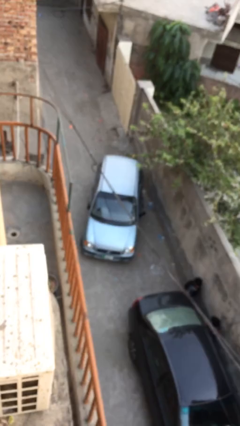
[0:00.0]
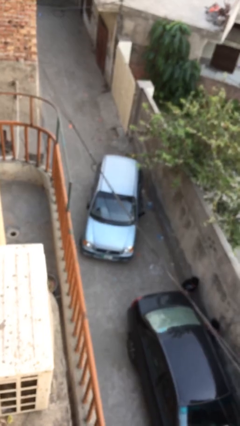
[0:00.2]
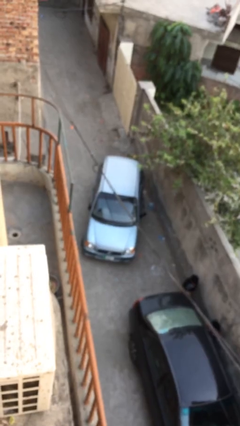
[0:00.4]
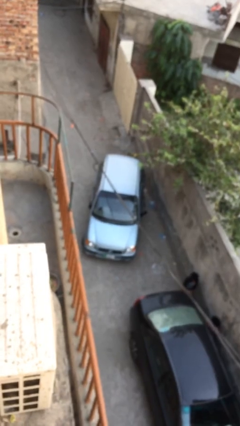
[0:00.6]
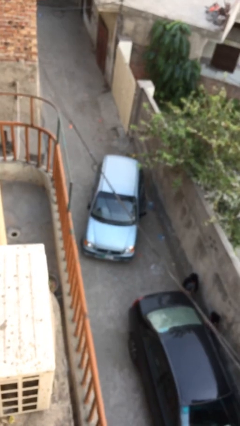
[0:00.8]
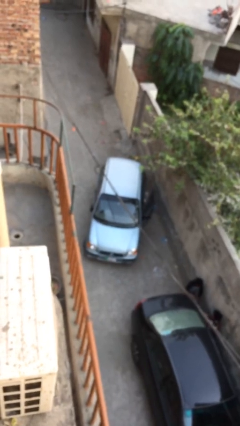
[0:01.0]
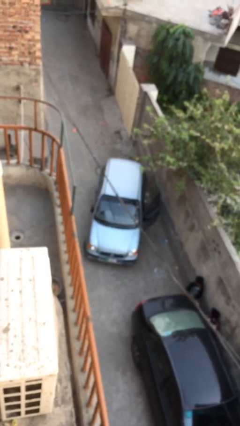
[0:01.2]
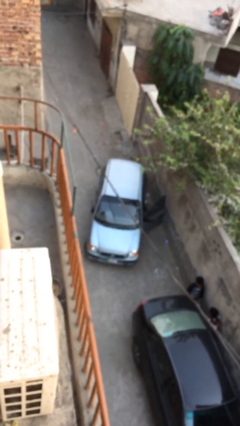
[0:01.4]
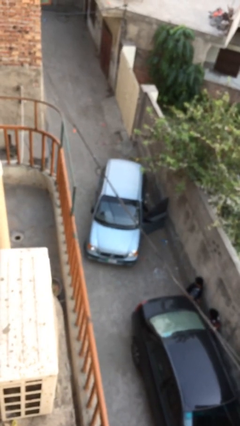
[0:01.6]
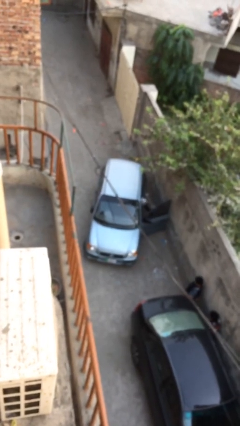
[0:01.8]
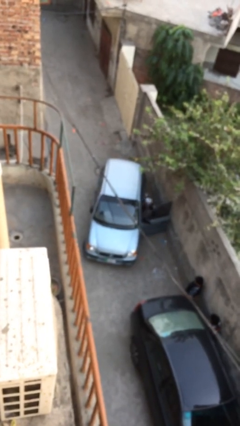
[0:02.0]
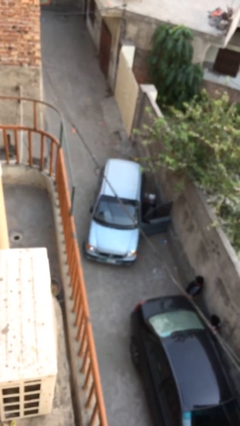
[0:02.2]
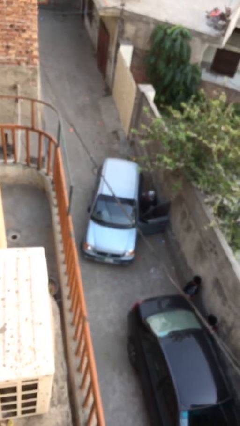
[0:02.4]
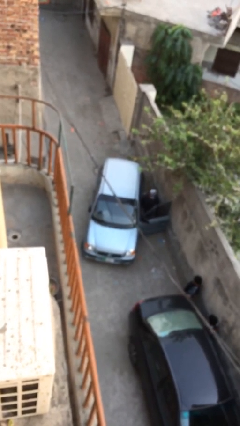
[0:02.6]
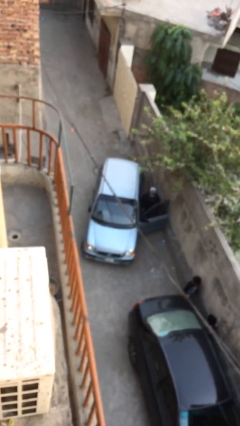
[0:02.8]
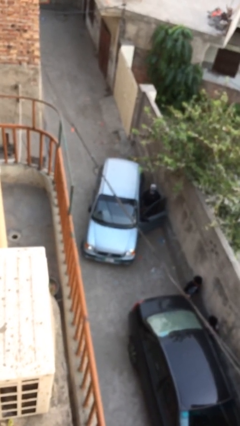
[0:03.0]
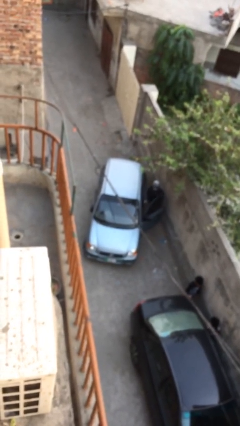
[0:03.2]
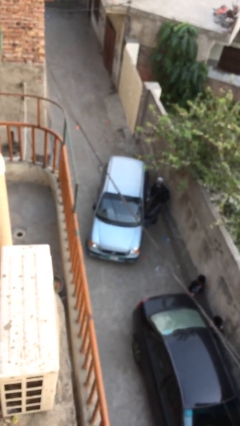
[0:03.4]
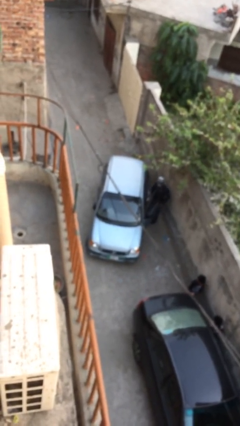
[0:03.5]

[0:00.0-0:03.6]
car drops off person

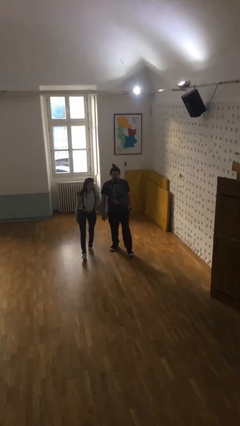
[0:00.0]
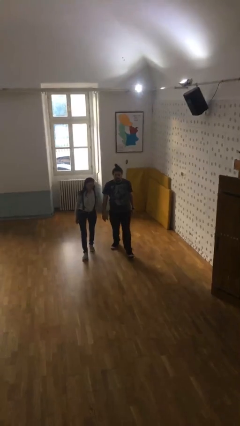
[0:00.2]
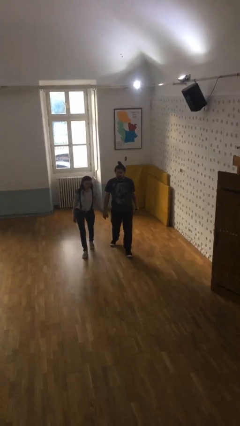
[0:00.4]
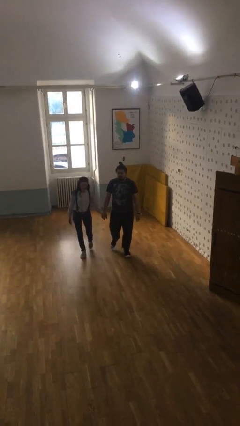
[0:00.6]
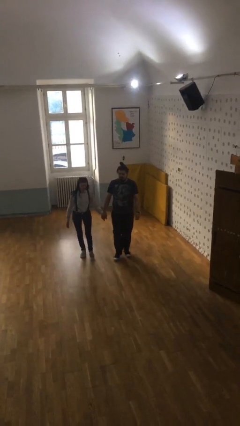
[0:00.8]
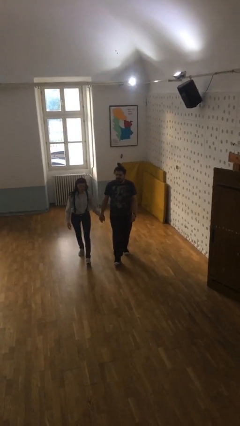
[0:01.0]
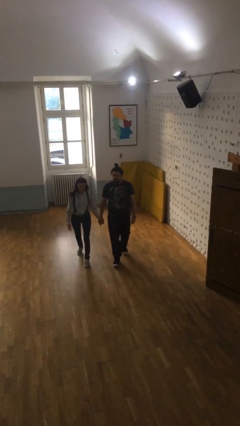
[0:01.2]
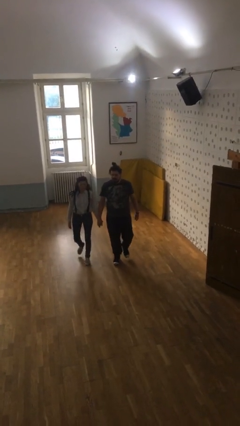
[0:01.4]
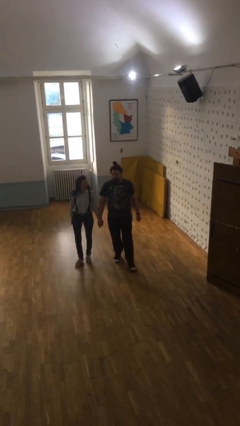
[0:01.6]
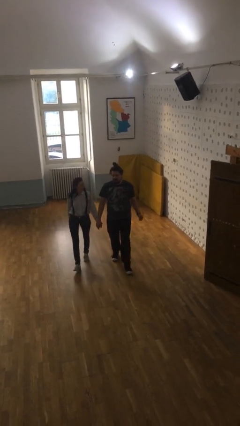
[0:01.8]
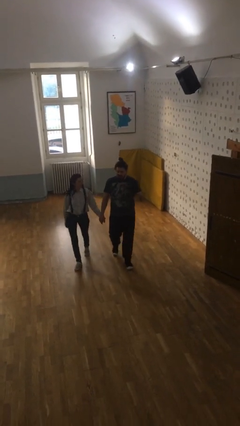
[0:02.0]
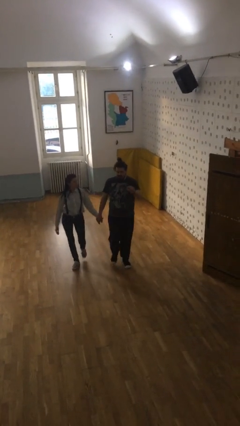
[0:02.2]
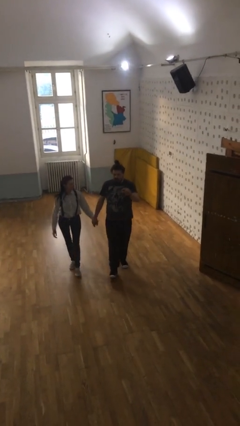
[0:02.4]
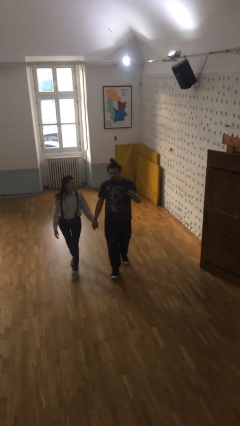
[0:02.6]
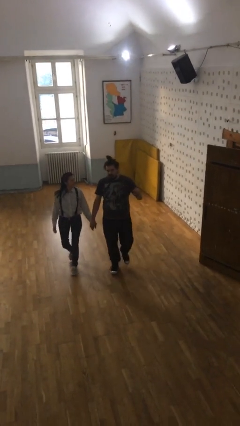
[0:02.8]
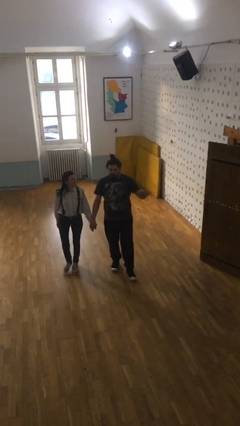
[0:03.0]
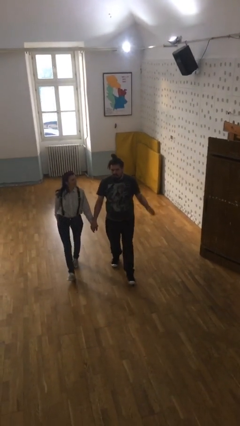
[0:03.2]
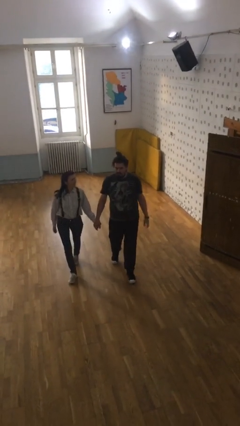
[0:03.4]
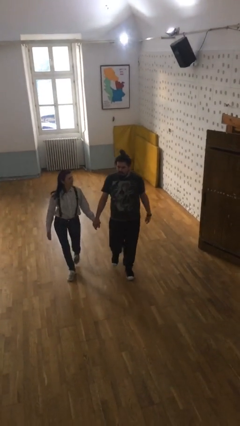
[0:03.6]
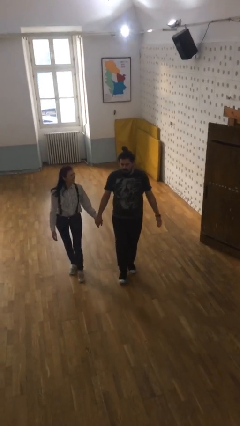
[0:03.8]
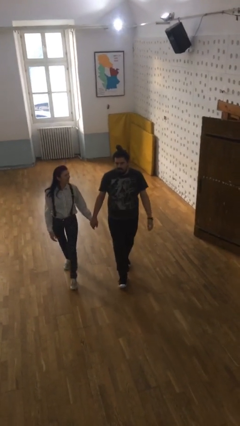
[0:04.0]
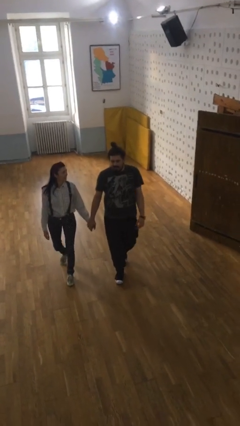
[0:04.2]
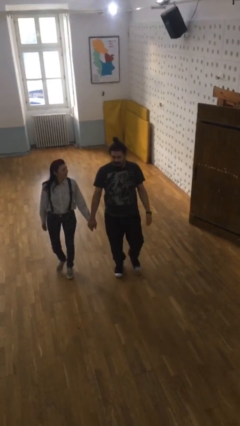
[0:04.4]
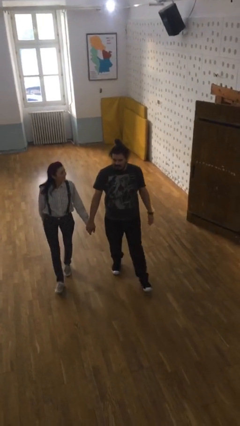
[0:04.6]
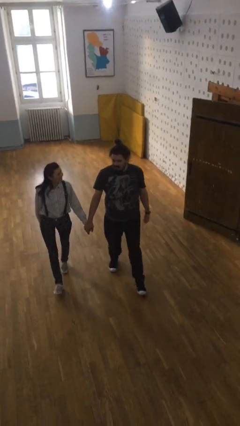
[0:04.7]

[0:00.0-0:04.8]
person holds hand

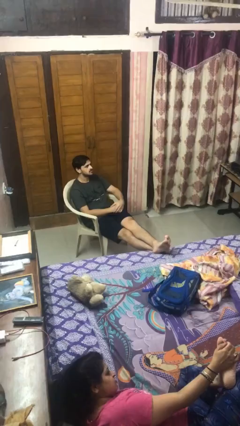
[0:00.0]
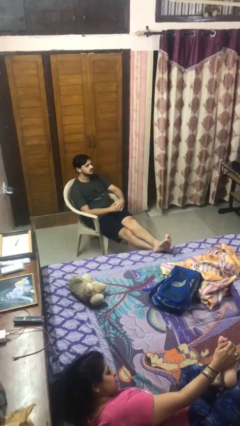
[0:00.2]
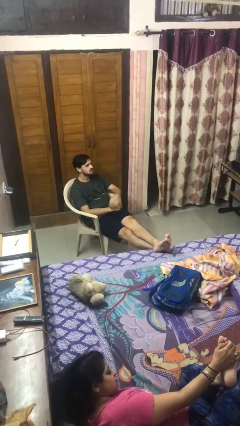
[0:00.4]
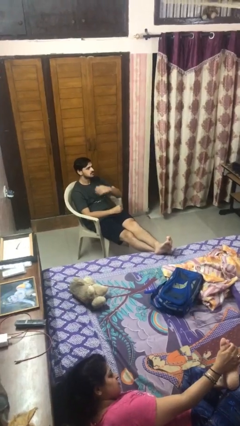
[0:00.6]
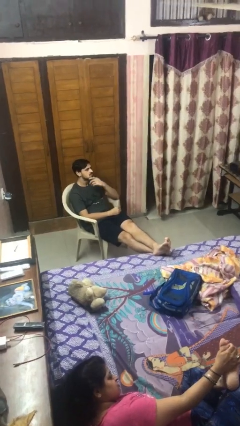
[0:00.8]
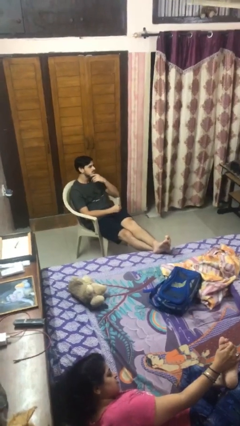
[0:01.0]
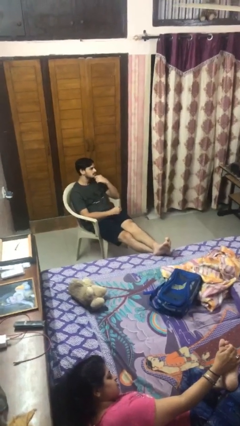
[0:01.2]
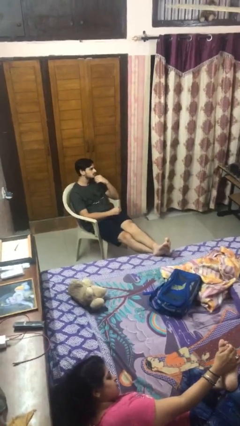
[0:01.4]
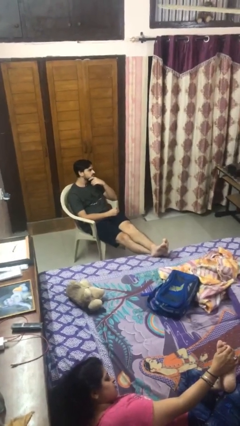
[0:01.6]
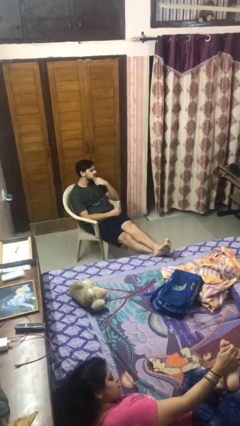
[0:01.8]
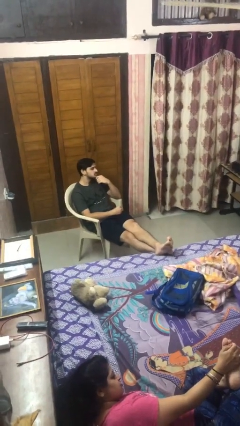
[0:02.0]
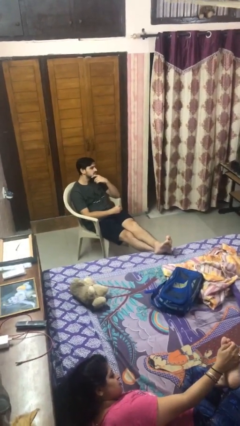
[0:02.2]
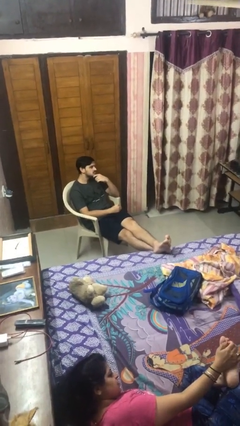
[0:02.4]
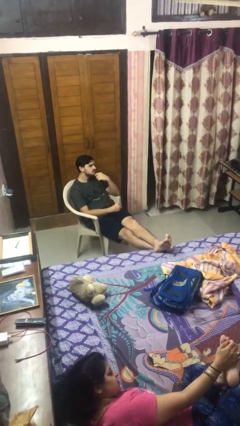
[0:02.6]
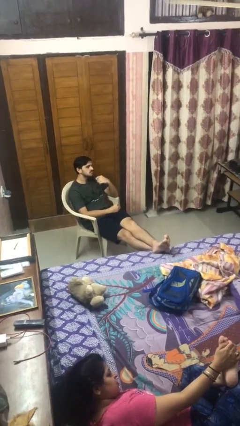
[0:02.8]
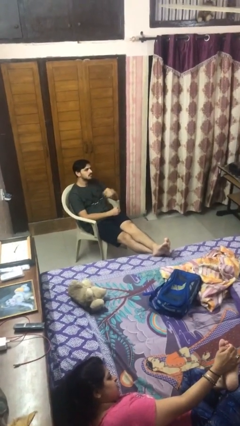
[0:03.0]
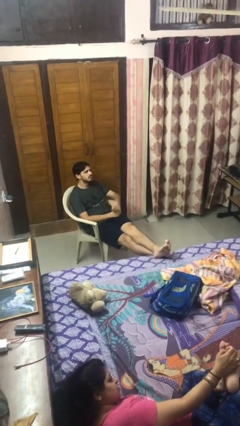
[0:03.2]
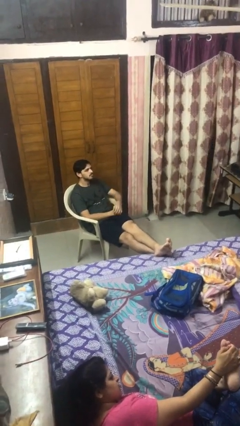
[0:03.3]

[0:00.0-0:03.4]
person strokes chin

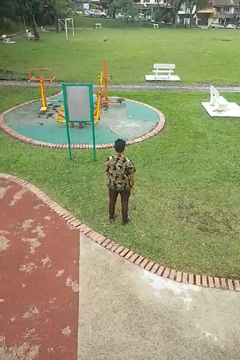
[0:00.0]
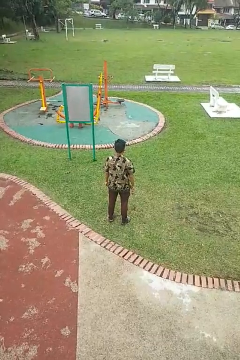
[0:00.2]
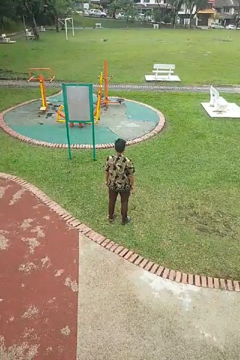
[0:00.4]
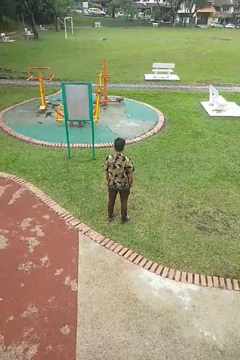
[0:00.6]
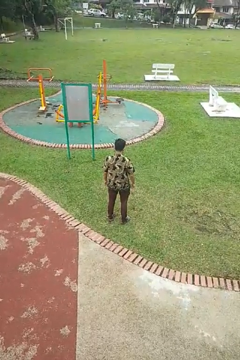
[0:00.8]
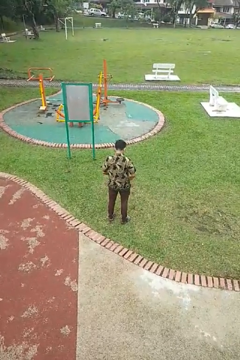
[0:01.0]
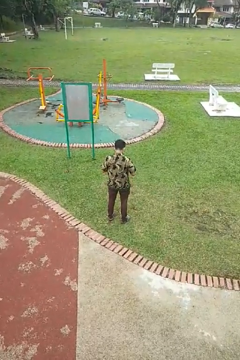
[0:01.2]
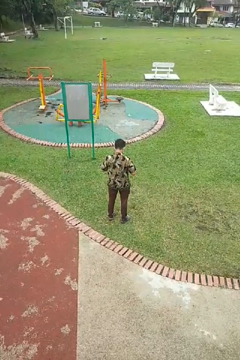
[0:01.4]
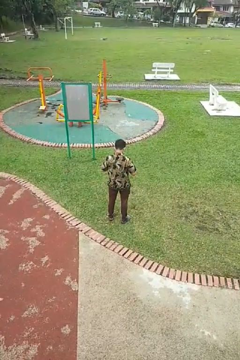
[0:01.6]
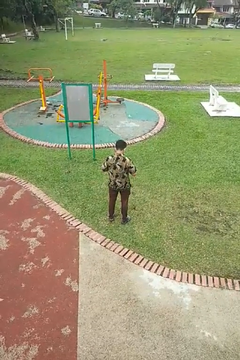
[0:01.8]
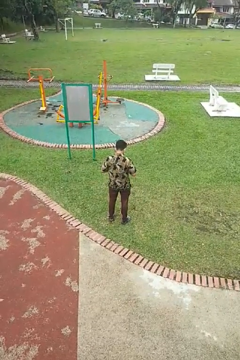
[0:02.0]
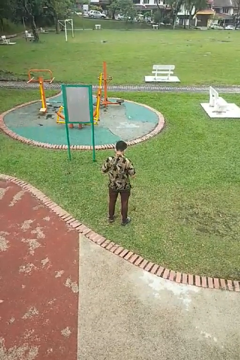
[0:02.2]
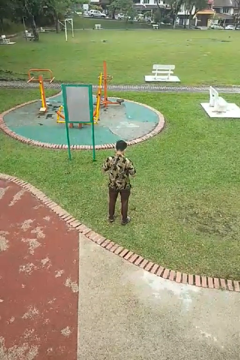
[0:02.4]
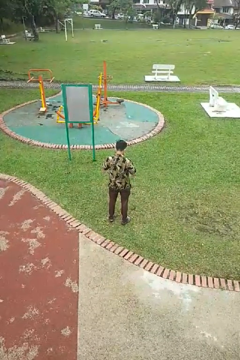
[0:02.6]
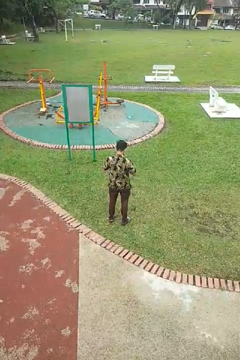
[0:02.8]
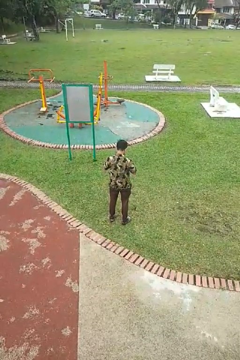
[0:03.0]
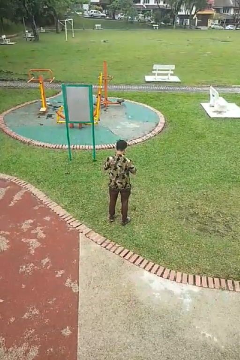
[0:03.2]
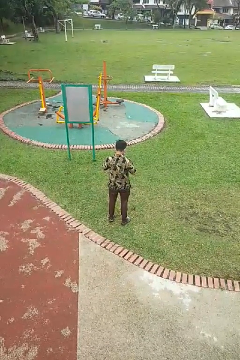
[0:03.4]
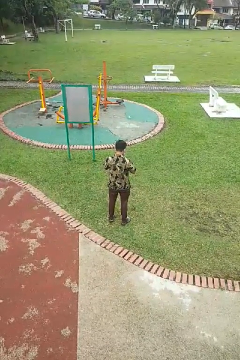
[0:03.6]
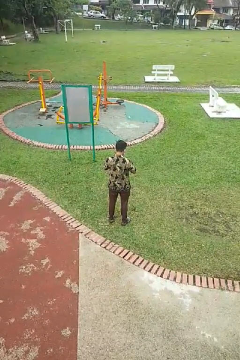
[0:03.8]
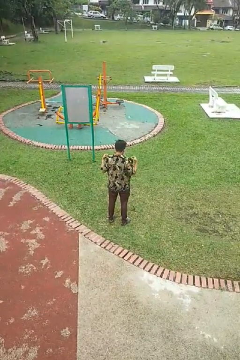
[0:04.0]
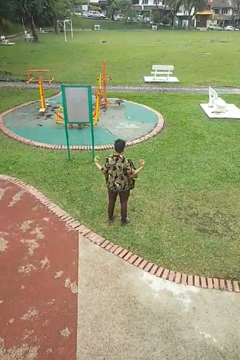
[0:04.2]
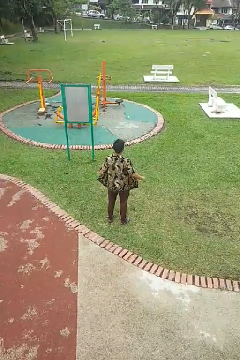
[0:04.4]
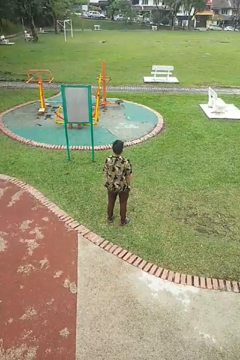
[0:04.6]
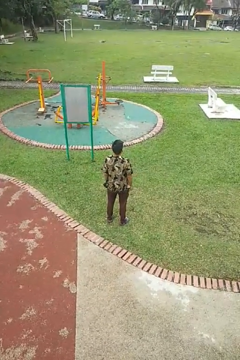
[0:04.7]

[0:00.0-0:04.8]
person unbuttons shirt

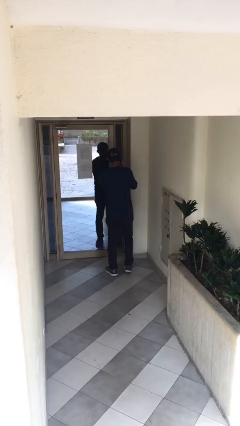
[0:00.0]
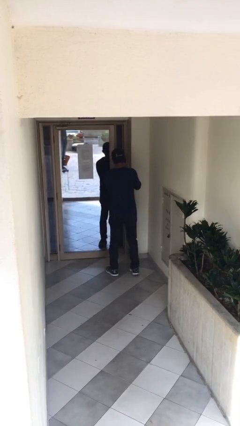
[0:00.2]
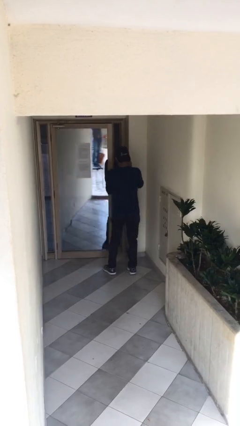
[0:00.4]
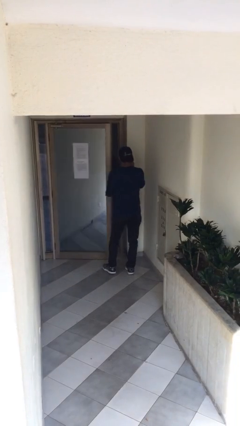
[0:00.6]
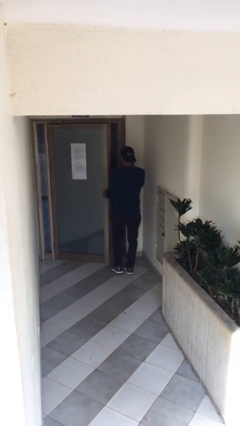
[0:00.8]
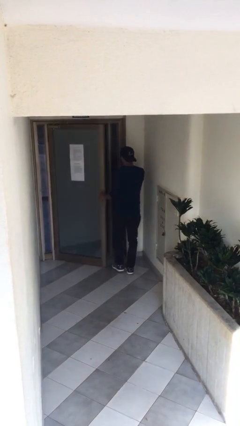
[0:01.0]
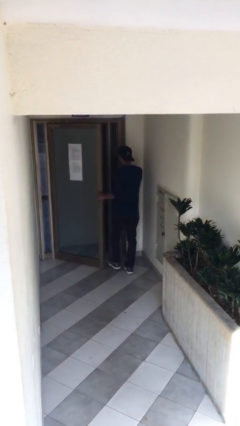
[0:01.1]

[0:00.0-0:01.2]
person opens facility door

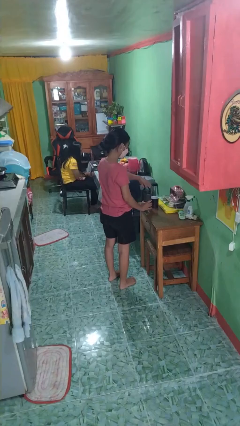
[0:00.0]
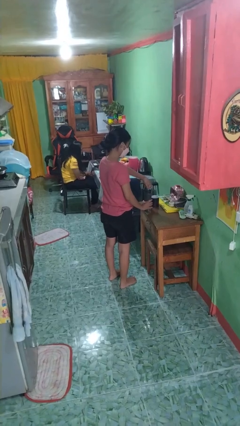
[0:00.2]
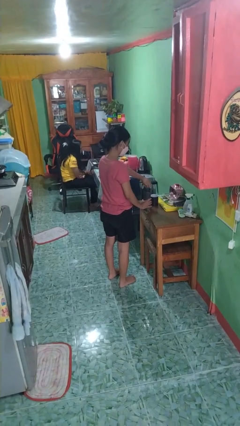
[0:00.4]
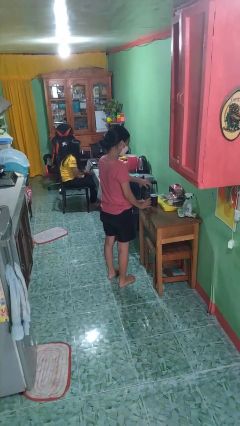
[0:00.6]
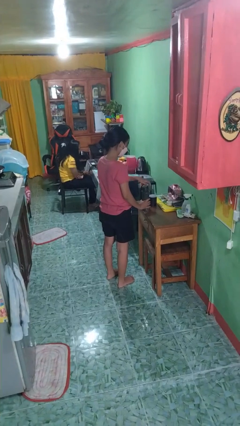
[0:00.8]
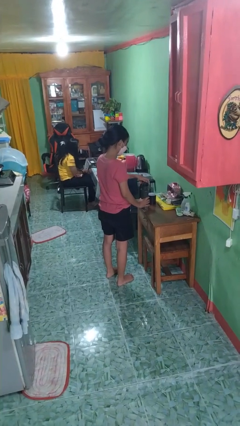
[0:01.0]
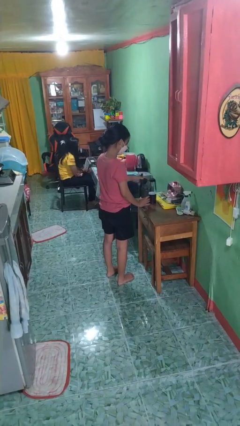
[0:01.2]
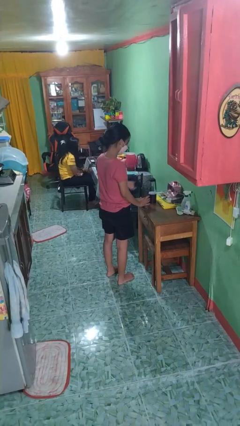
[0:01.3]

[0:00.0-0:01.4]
person unscrews lid from bottle
